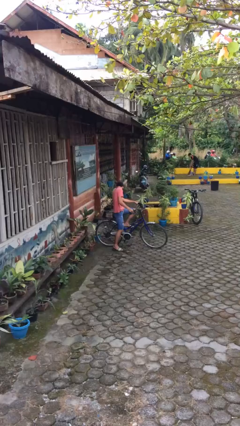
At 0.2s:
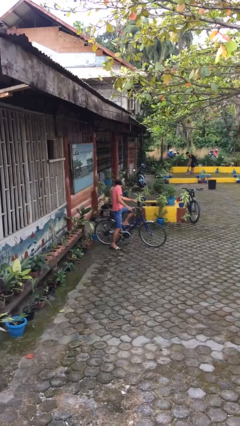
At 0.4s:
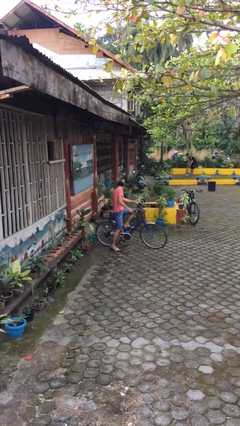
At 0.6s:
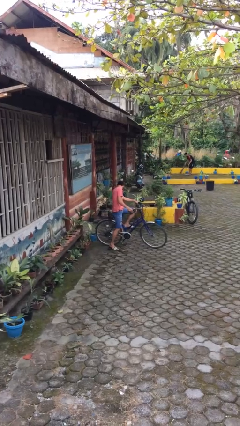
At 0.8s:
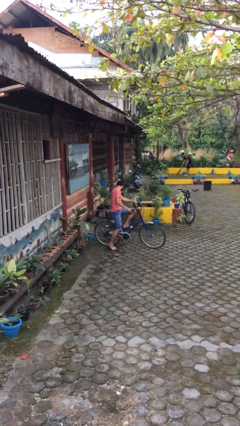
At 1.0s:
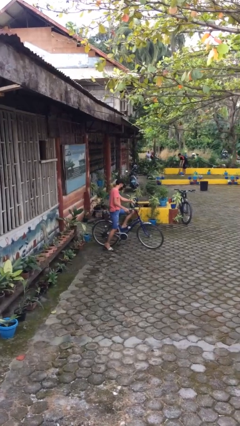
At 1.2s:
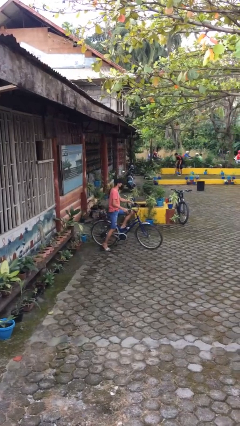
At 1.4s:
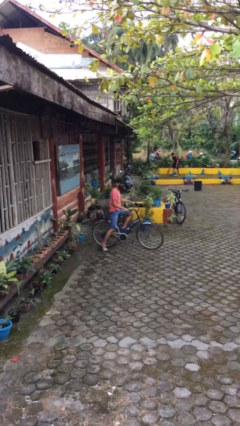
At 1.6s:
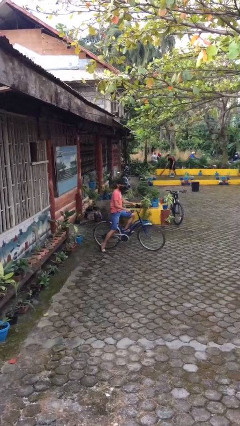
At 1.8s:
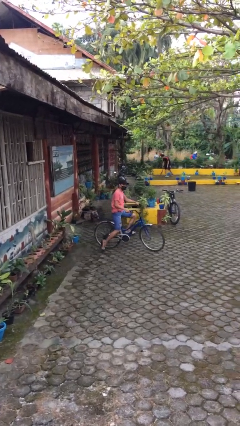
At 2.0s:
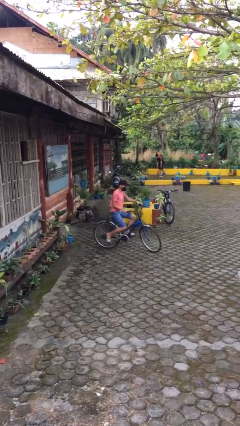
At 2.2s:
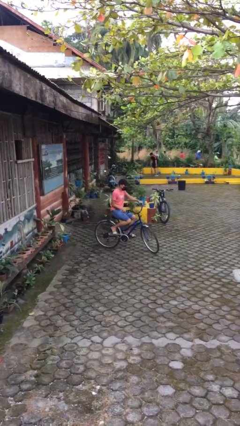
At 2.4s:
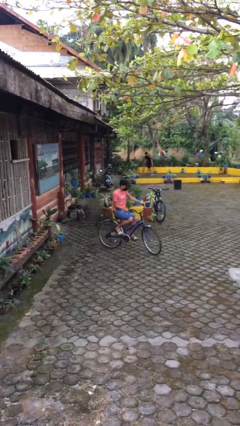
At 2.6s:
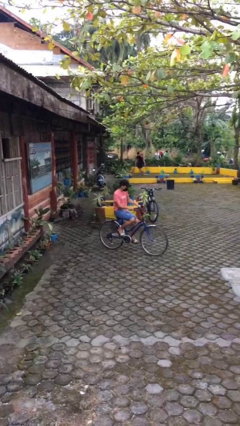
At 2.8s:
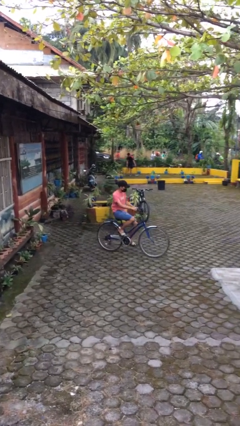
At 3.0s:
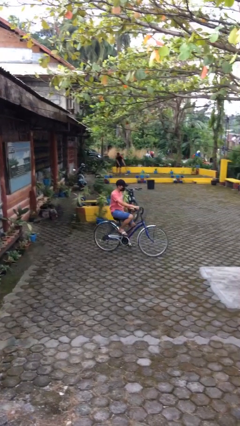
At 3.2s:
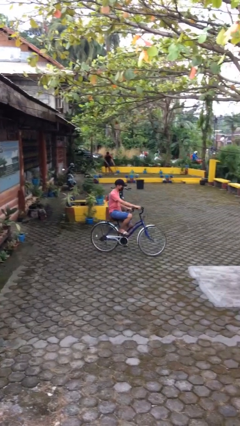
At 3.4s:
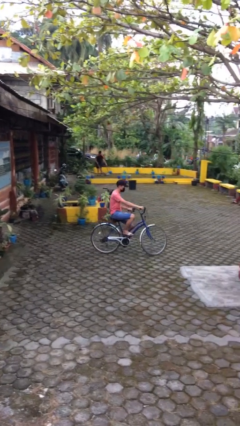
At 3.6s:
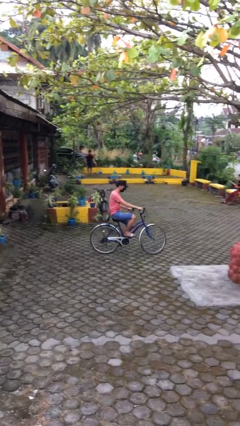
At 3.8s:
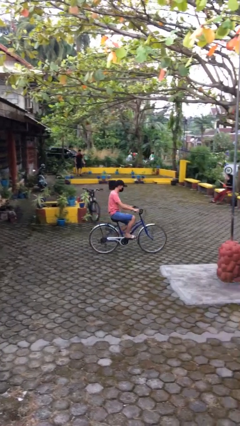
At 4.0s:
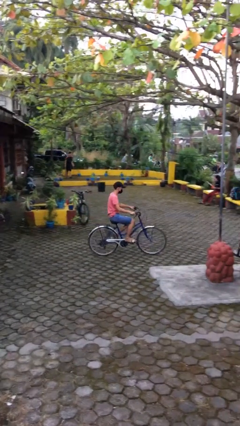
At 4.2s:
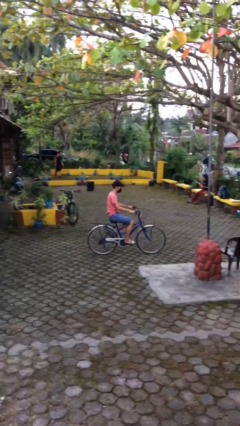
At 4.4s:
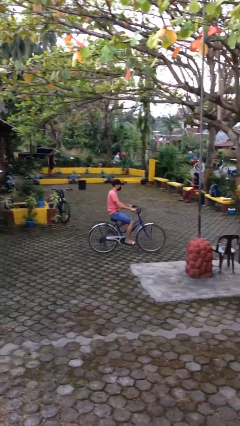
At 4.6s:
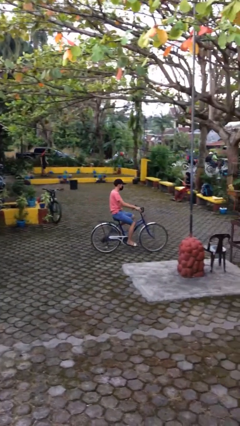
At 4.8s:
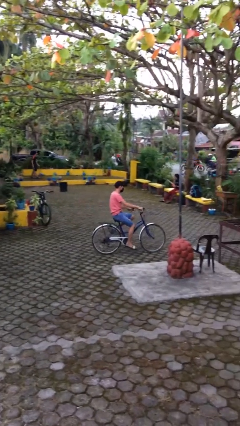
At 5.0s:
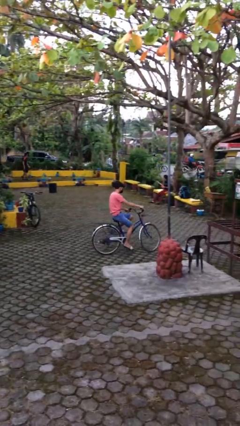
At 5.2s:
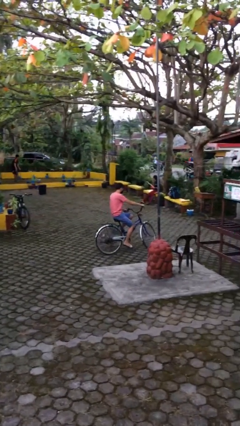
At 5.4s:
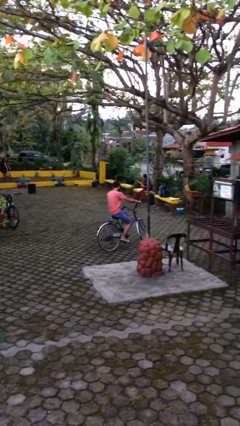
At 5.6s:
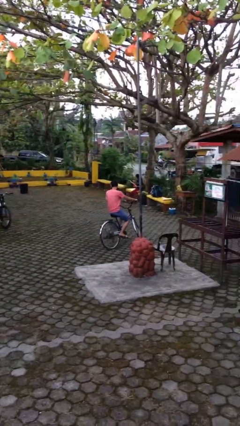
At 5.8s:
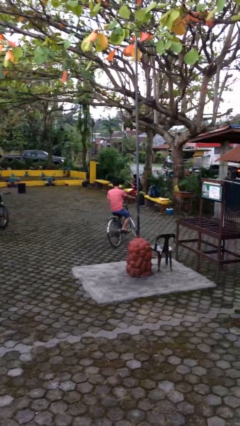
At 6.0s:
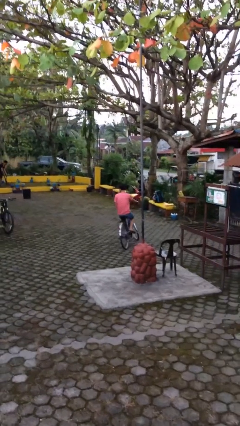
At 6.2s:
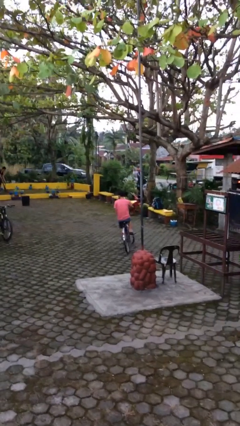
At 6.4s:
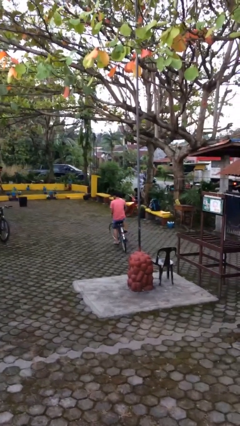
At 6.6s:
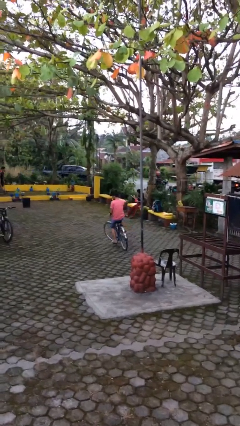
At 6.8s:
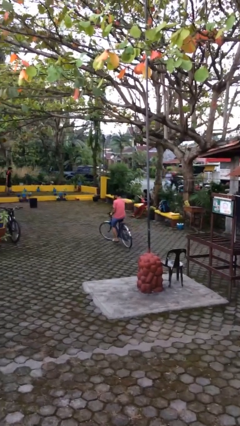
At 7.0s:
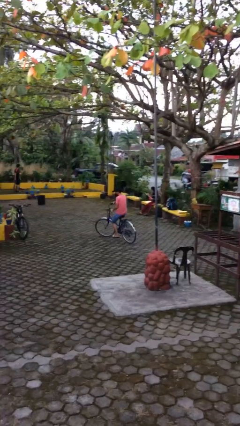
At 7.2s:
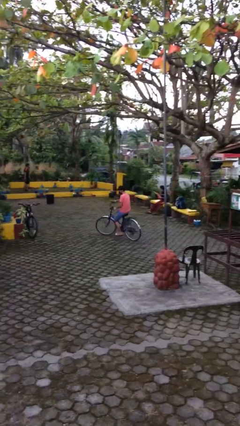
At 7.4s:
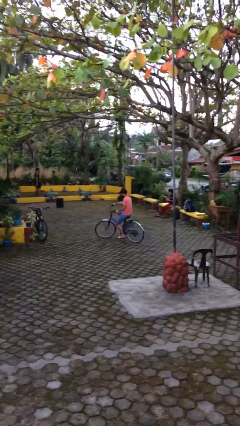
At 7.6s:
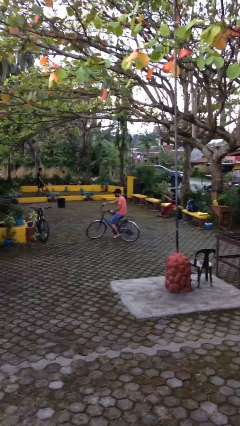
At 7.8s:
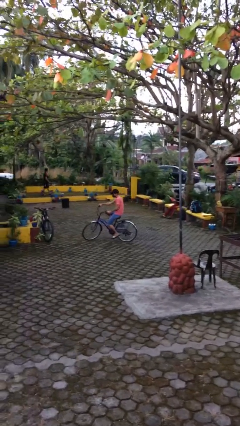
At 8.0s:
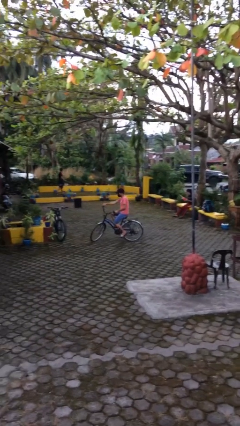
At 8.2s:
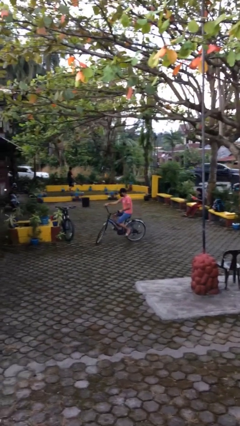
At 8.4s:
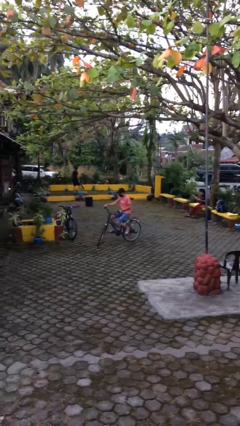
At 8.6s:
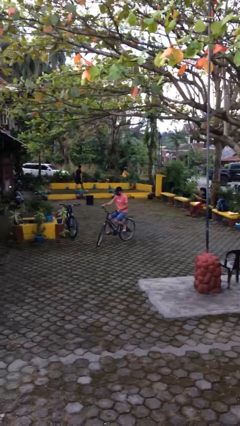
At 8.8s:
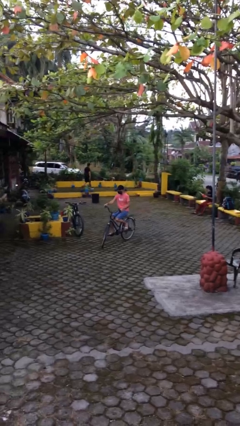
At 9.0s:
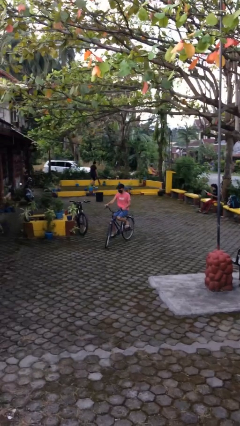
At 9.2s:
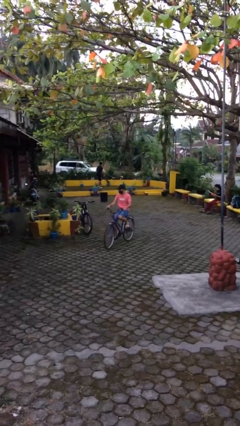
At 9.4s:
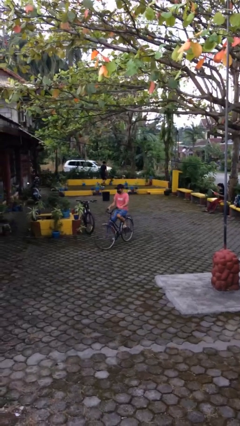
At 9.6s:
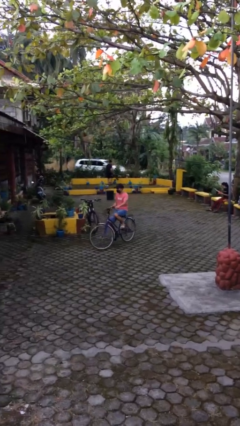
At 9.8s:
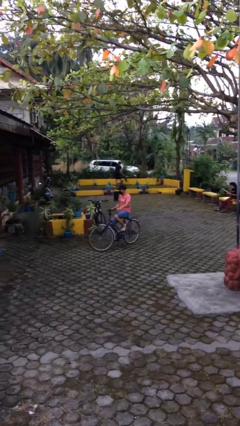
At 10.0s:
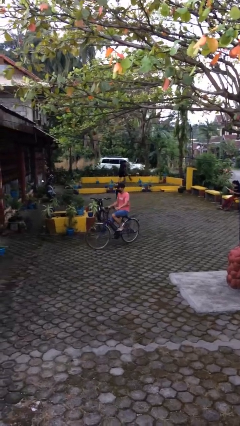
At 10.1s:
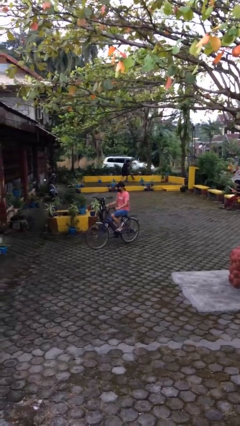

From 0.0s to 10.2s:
person rides bicycle

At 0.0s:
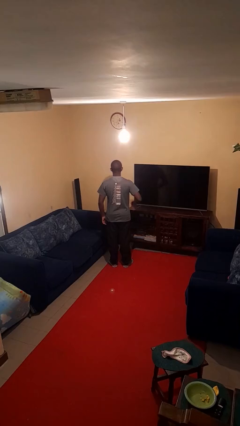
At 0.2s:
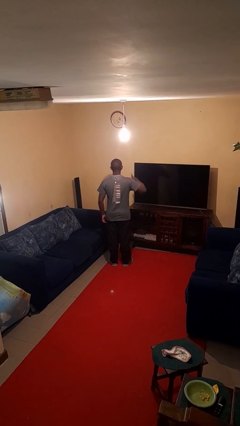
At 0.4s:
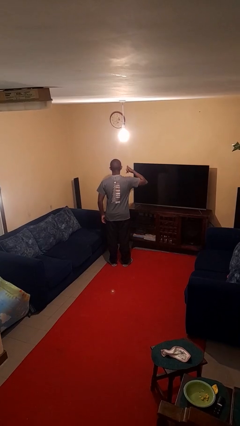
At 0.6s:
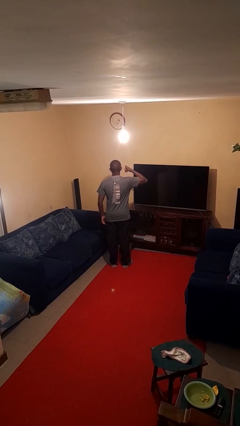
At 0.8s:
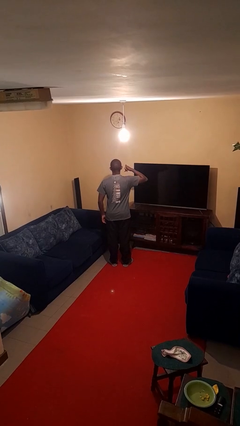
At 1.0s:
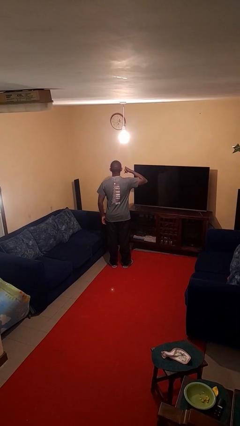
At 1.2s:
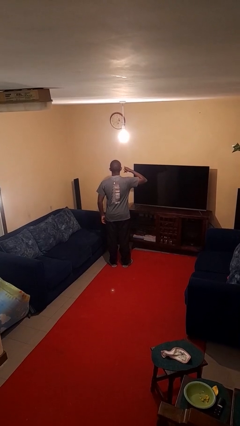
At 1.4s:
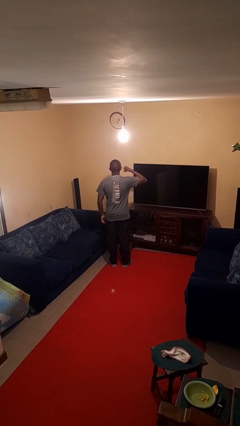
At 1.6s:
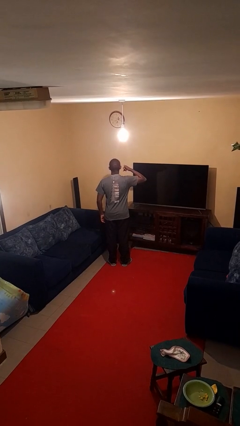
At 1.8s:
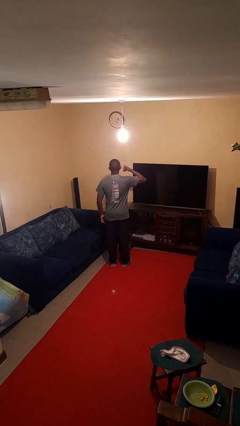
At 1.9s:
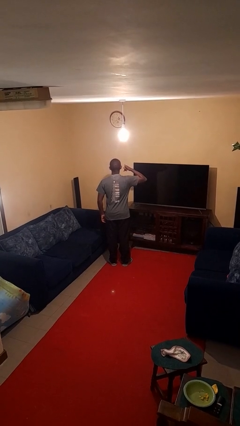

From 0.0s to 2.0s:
person gestures call me

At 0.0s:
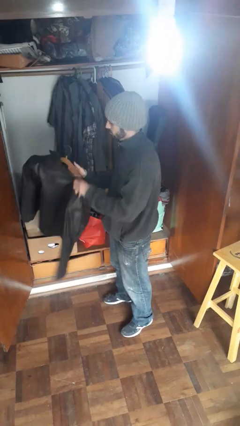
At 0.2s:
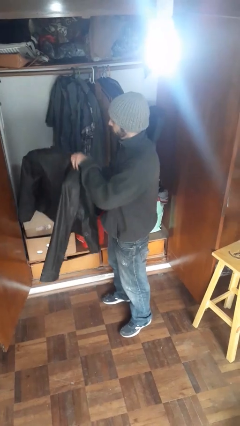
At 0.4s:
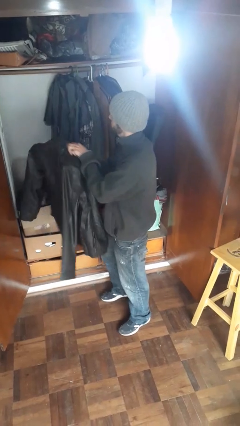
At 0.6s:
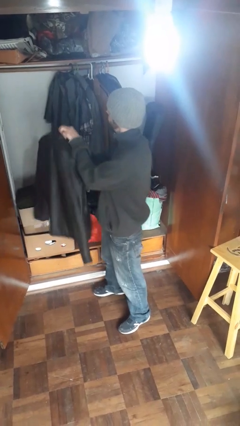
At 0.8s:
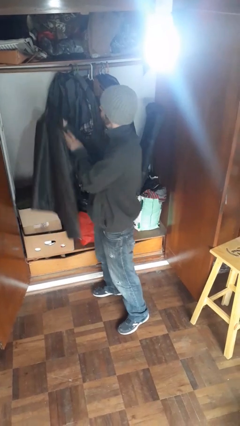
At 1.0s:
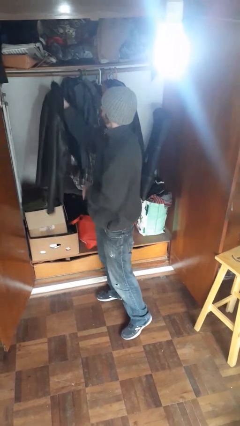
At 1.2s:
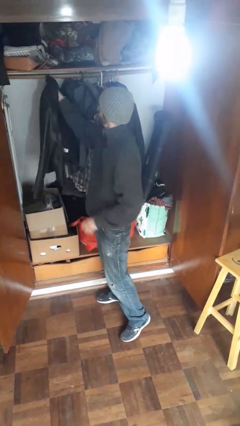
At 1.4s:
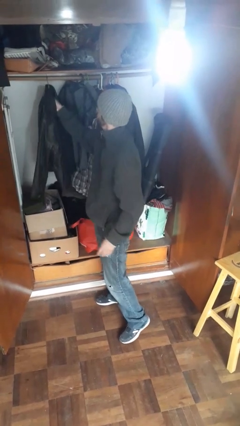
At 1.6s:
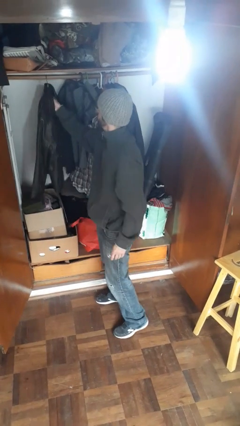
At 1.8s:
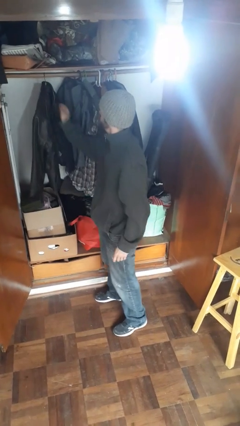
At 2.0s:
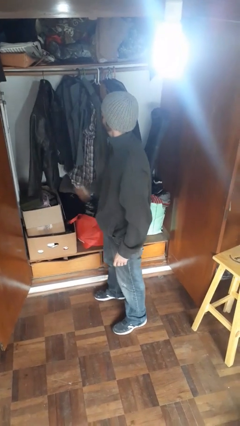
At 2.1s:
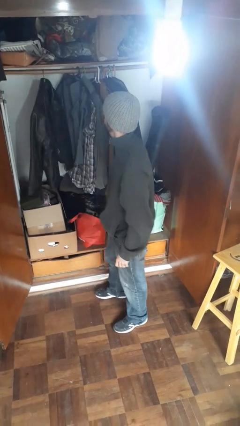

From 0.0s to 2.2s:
person puts clothes into closet

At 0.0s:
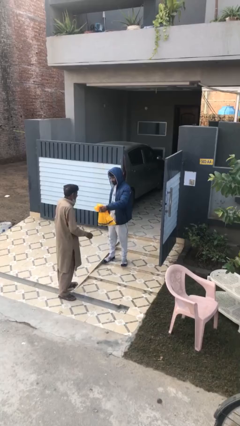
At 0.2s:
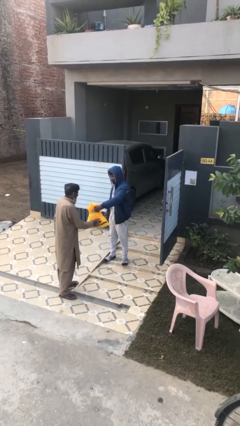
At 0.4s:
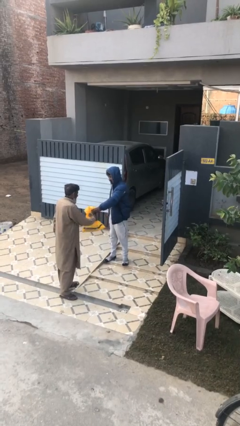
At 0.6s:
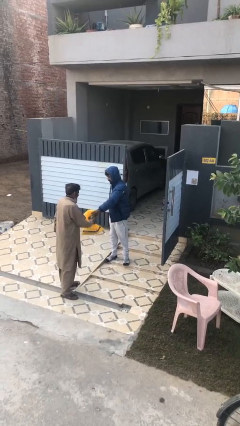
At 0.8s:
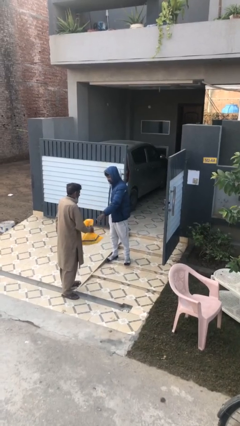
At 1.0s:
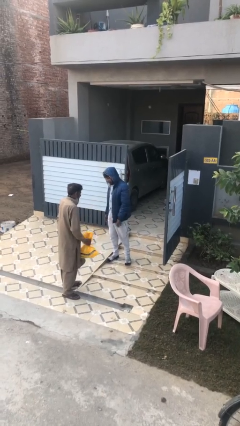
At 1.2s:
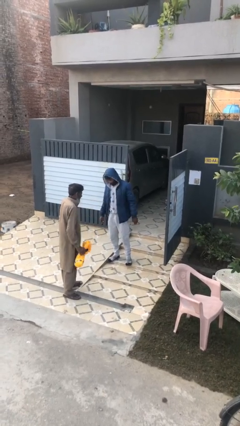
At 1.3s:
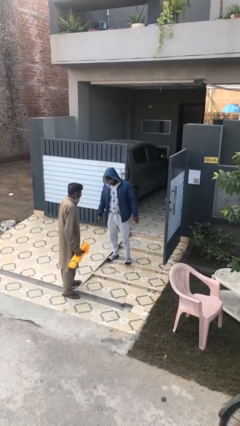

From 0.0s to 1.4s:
person transfers object to person

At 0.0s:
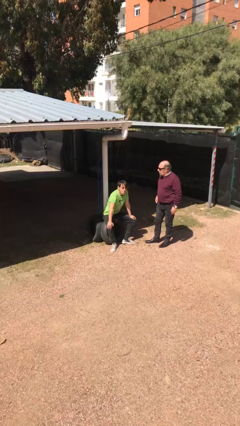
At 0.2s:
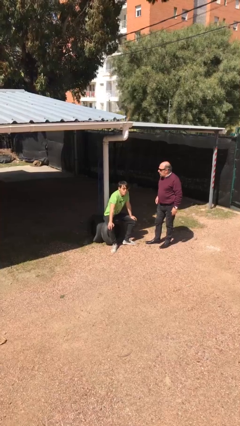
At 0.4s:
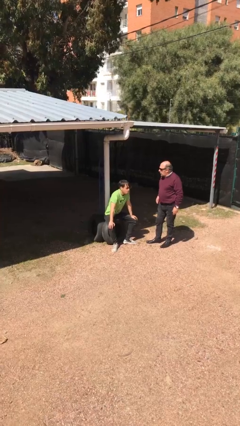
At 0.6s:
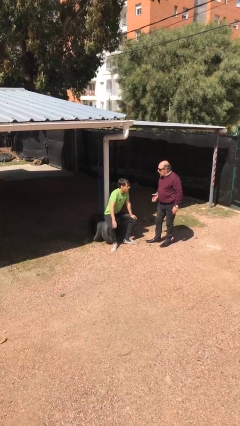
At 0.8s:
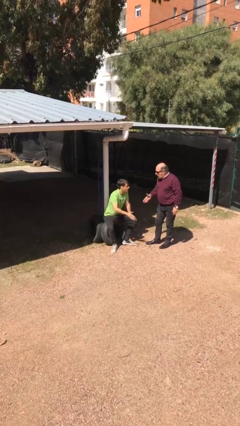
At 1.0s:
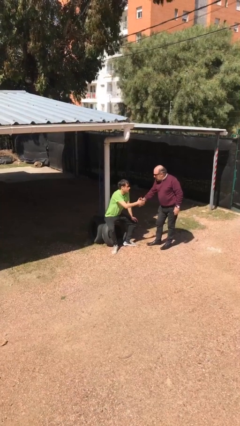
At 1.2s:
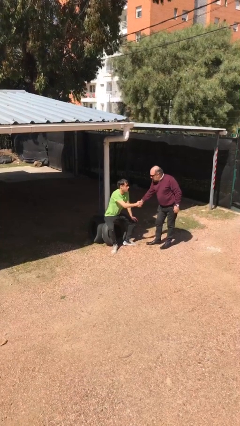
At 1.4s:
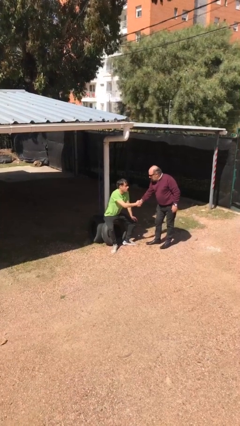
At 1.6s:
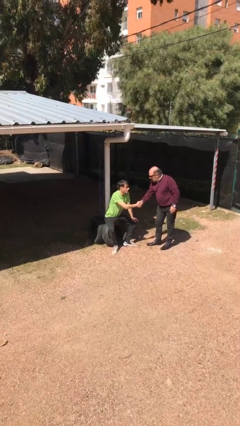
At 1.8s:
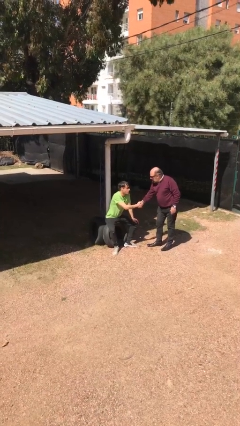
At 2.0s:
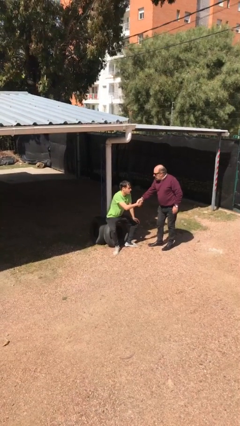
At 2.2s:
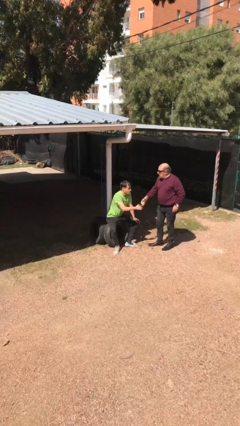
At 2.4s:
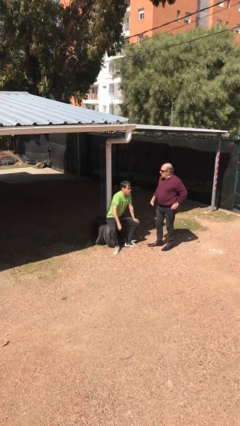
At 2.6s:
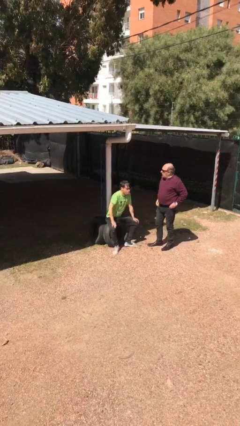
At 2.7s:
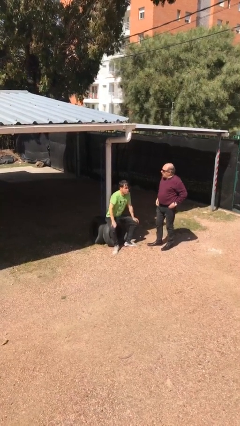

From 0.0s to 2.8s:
person shakes hand
